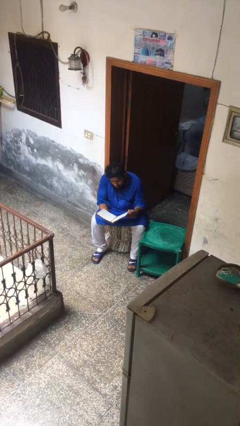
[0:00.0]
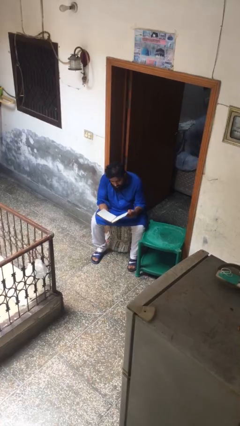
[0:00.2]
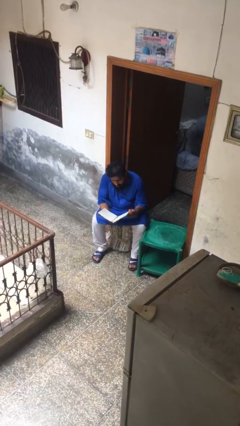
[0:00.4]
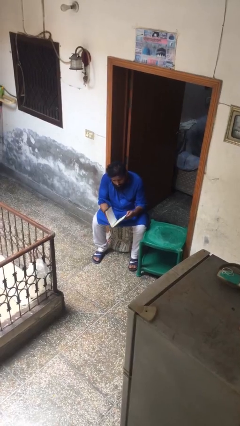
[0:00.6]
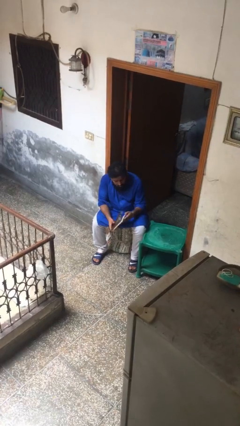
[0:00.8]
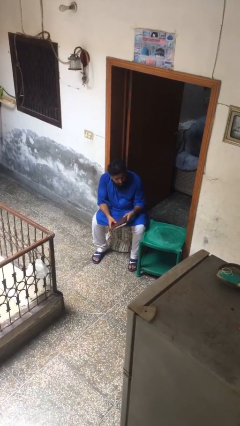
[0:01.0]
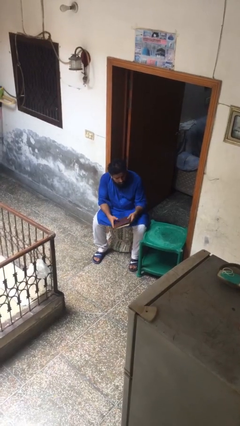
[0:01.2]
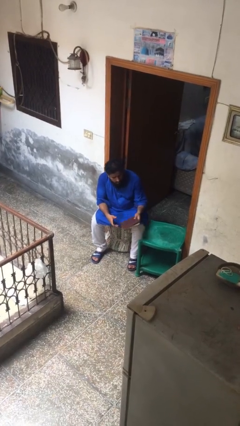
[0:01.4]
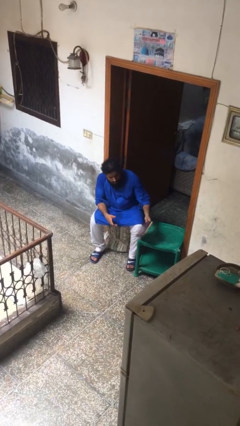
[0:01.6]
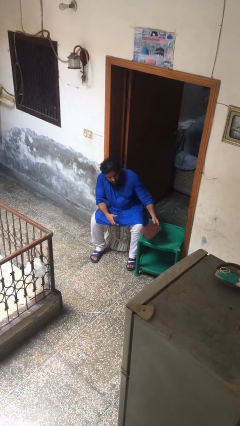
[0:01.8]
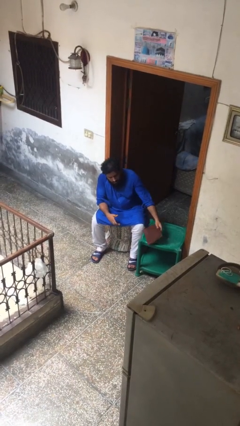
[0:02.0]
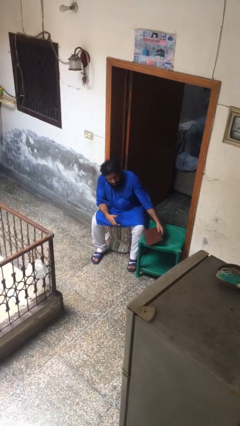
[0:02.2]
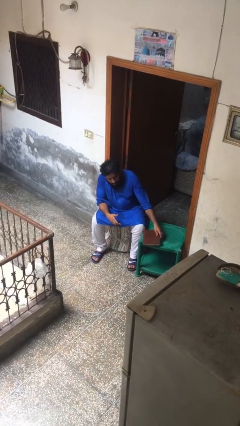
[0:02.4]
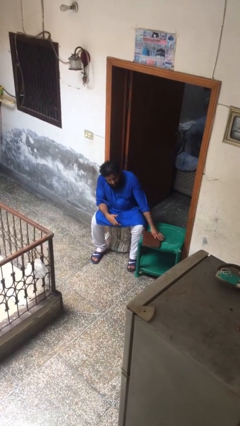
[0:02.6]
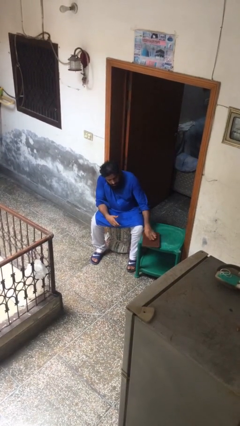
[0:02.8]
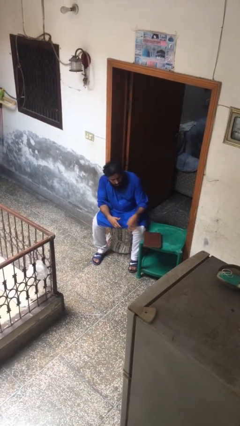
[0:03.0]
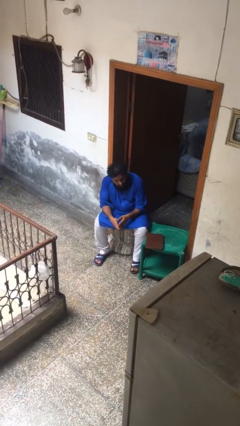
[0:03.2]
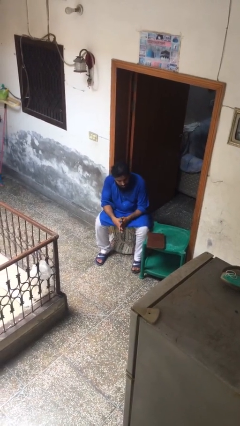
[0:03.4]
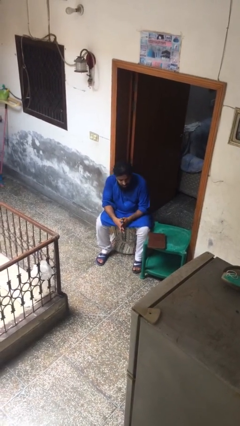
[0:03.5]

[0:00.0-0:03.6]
person puts down object on table

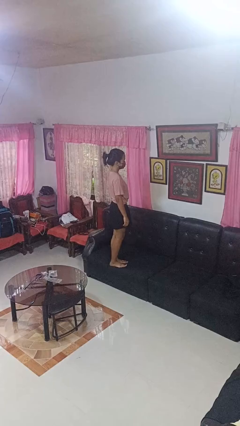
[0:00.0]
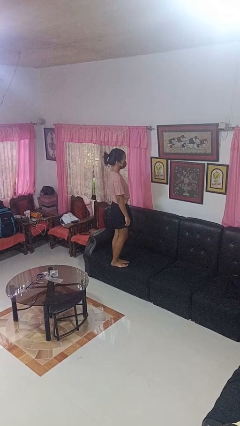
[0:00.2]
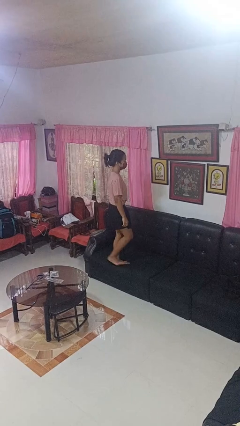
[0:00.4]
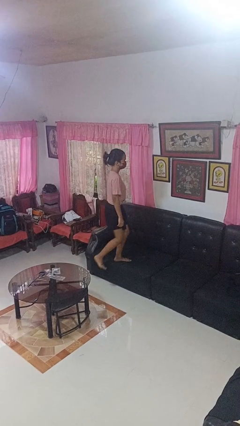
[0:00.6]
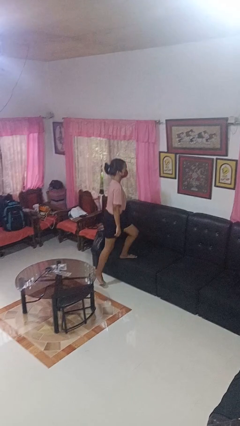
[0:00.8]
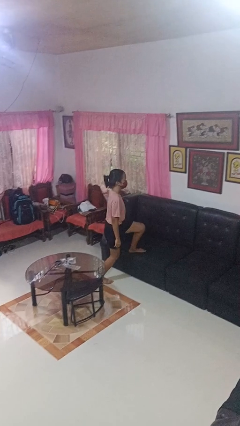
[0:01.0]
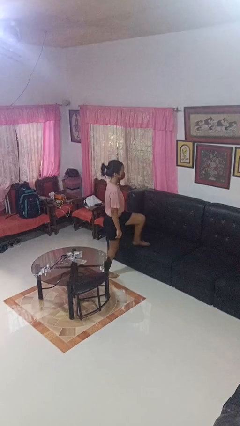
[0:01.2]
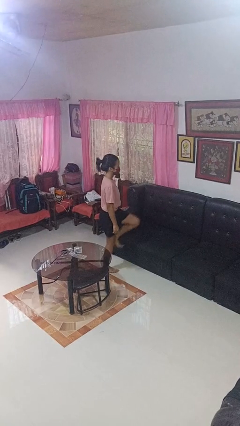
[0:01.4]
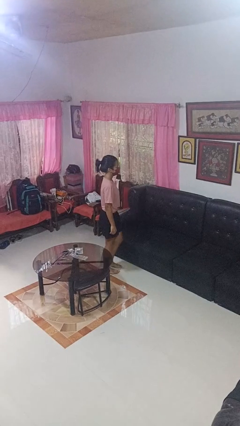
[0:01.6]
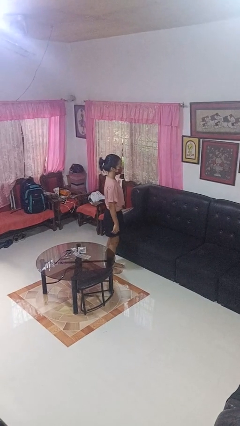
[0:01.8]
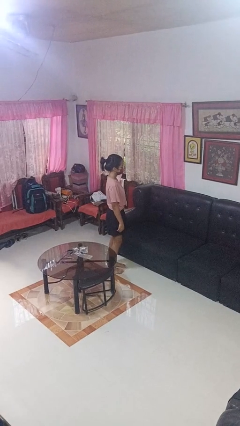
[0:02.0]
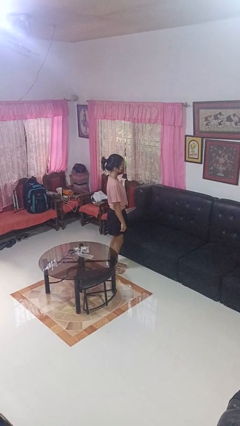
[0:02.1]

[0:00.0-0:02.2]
person climbs off couch

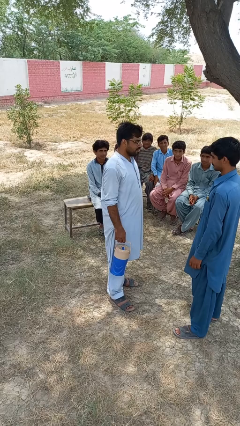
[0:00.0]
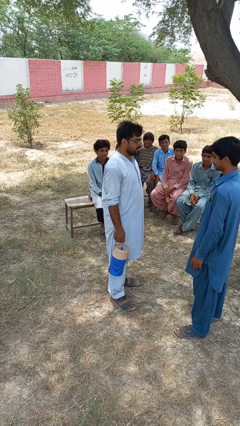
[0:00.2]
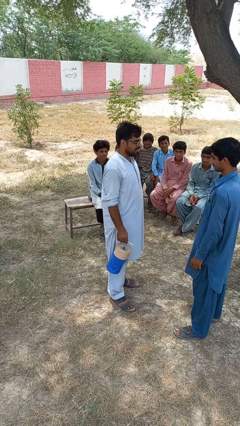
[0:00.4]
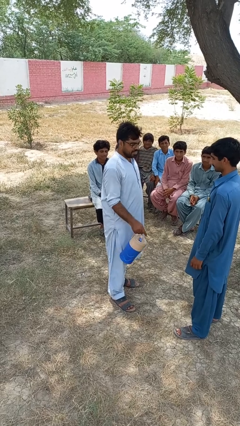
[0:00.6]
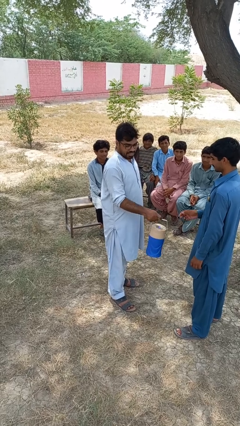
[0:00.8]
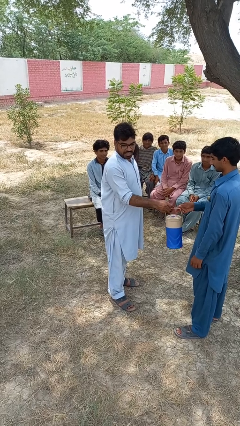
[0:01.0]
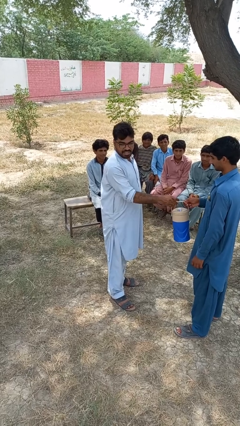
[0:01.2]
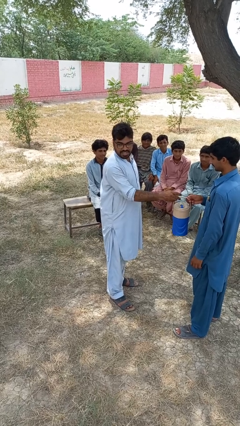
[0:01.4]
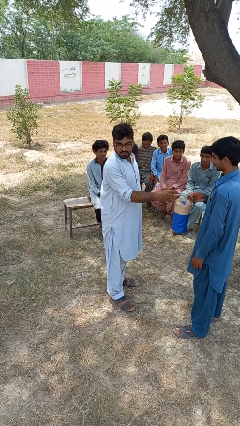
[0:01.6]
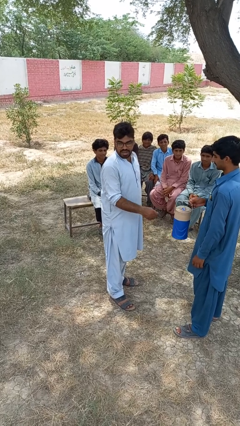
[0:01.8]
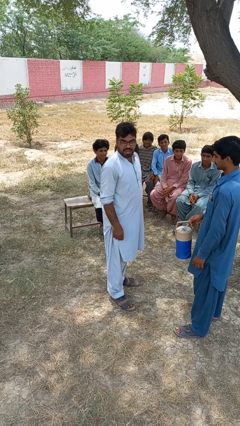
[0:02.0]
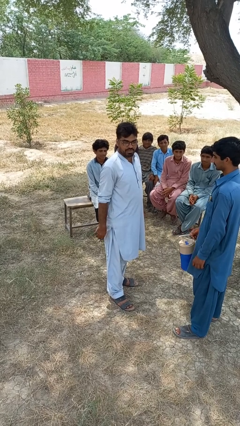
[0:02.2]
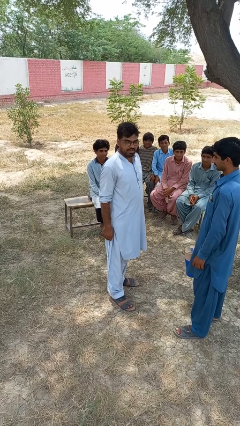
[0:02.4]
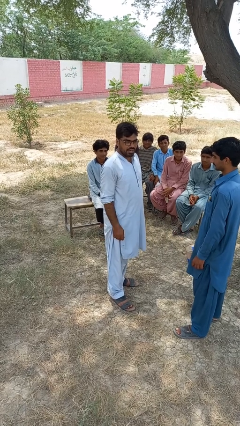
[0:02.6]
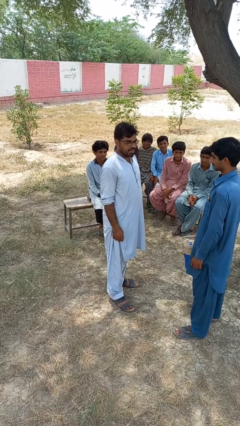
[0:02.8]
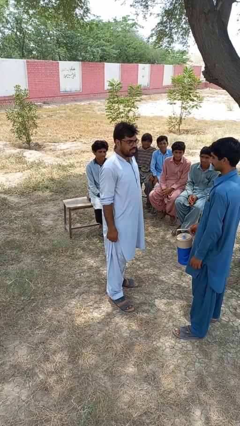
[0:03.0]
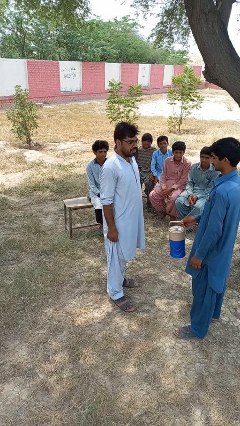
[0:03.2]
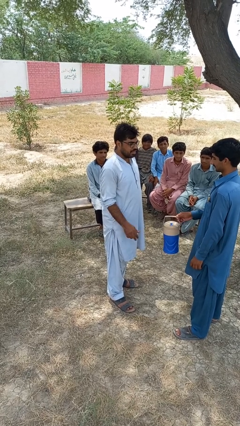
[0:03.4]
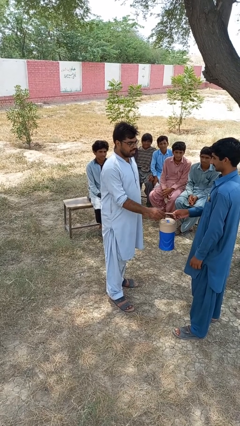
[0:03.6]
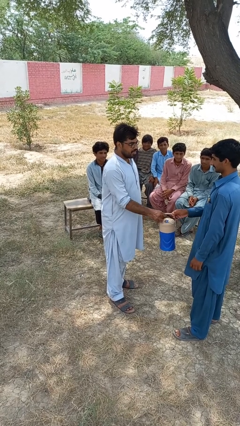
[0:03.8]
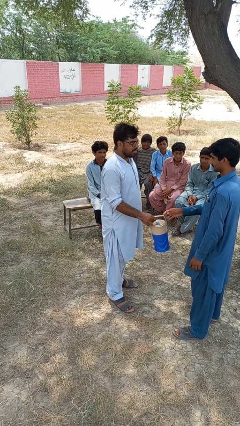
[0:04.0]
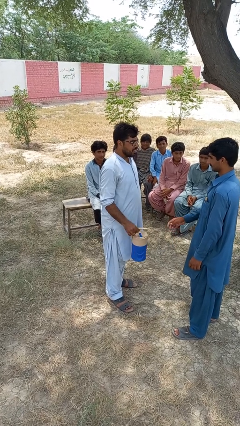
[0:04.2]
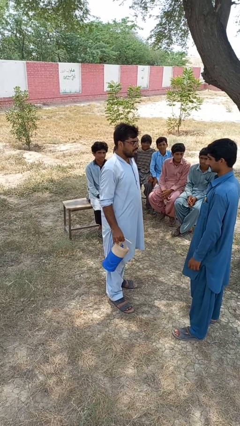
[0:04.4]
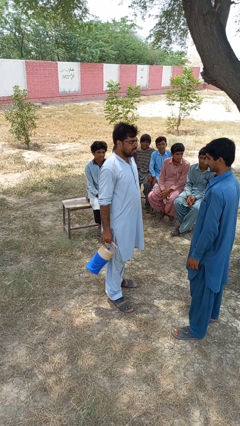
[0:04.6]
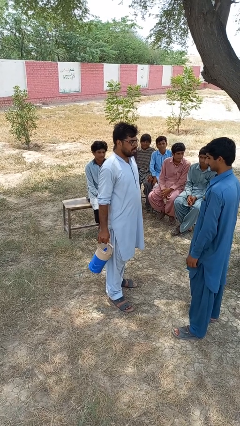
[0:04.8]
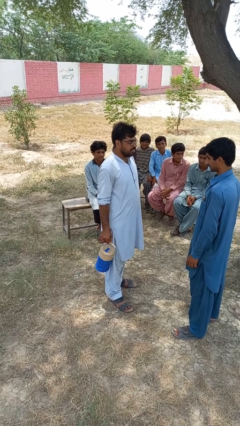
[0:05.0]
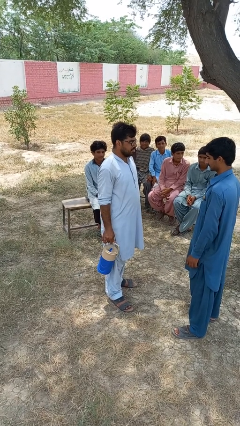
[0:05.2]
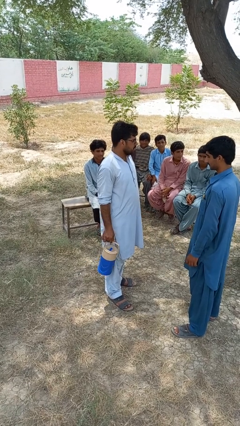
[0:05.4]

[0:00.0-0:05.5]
person transfers object to person

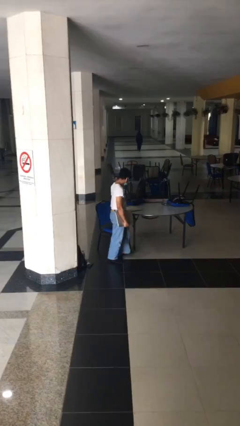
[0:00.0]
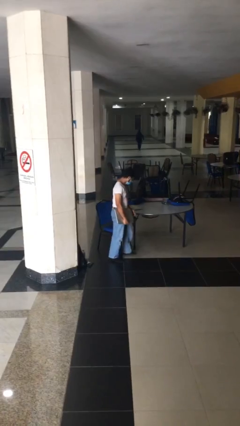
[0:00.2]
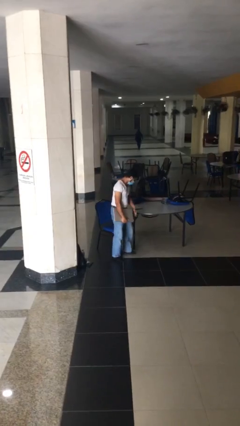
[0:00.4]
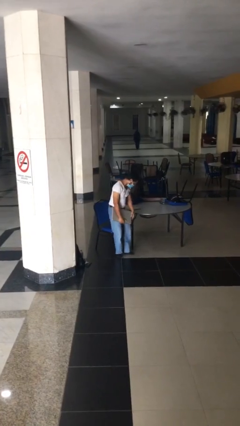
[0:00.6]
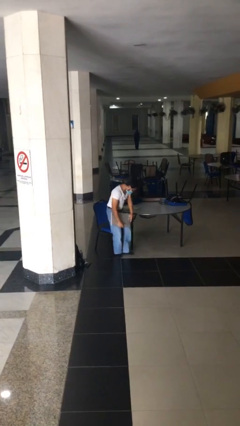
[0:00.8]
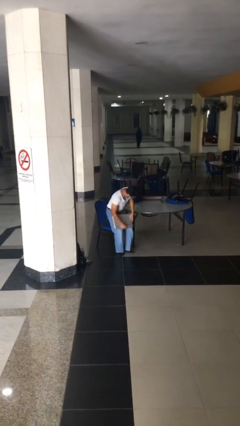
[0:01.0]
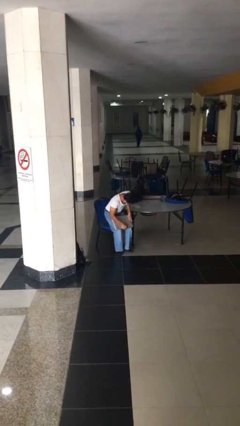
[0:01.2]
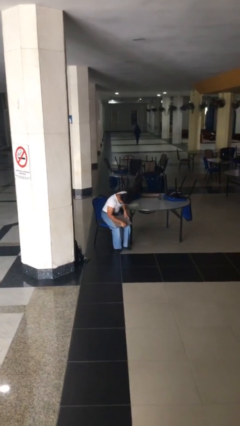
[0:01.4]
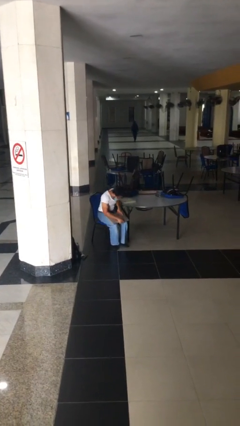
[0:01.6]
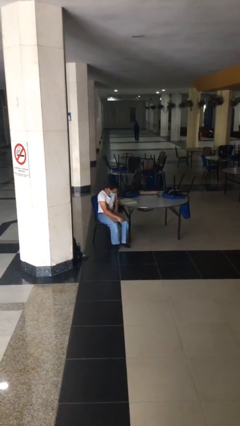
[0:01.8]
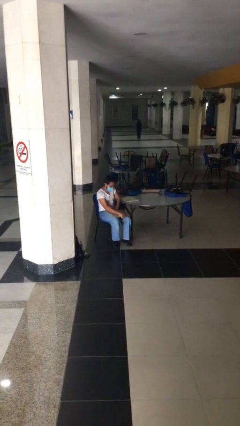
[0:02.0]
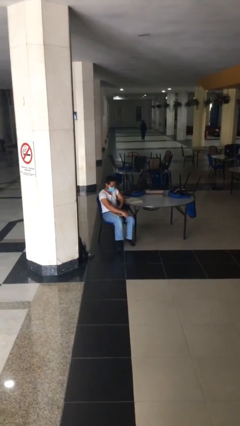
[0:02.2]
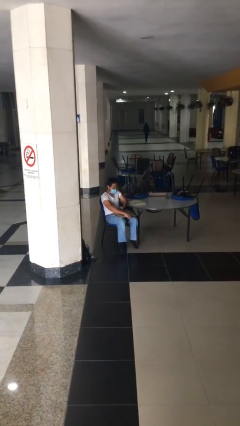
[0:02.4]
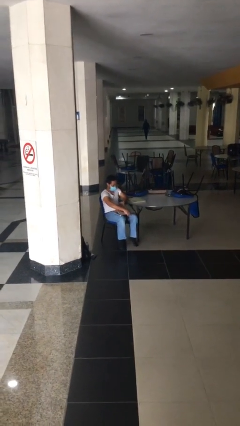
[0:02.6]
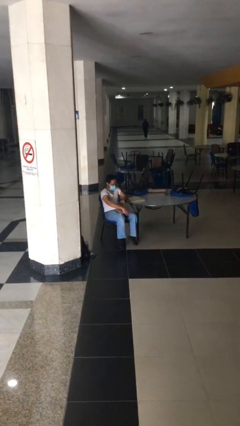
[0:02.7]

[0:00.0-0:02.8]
person sits down

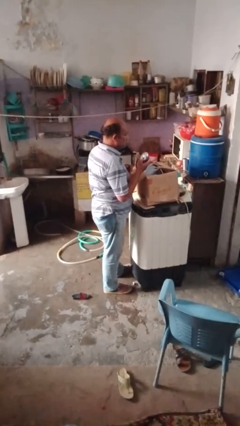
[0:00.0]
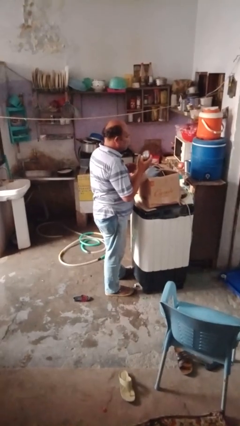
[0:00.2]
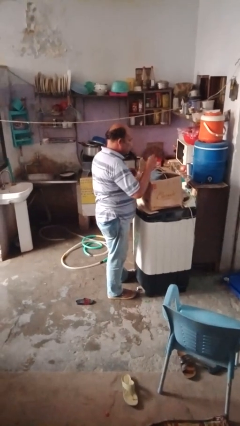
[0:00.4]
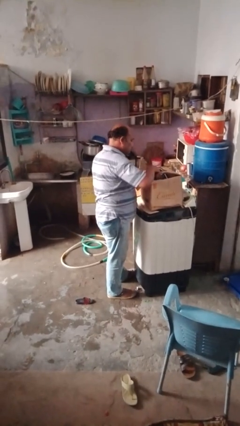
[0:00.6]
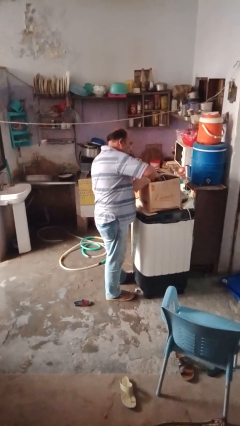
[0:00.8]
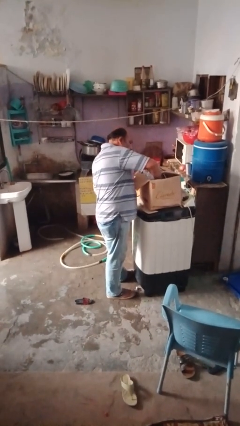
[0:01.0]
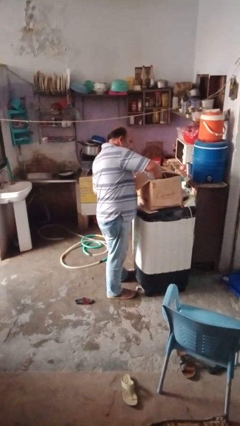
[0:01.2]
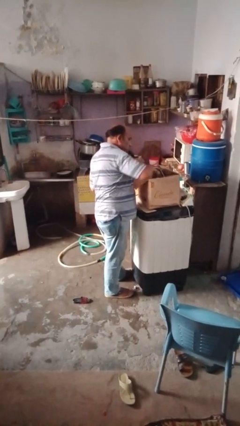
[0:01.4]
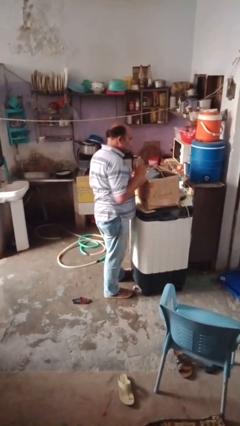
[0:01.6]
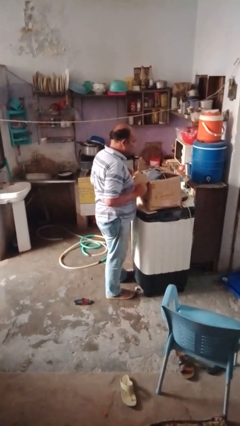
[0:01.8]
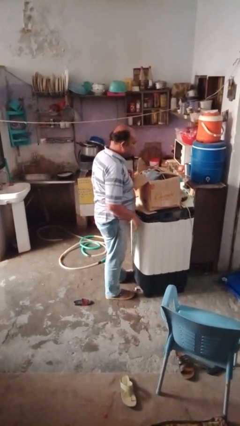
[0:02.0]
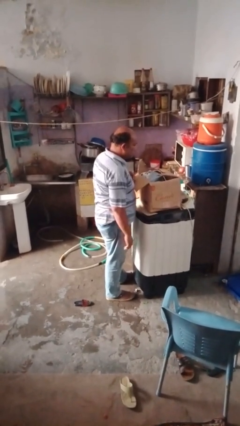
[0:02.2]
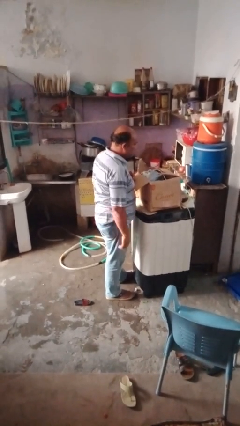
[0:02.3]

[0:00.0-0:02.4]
person puts object into box

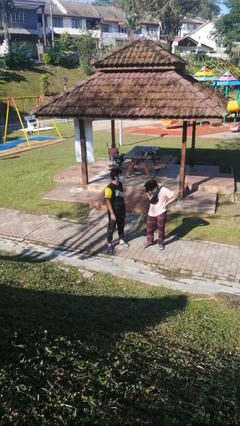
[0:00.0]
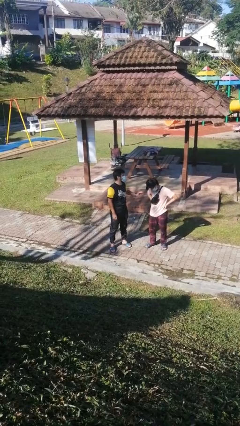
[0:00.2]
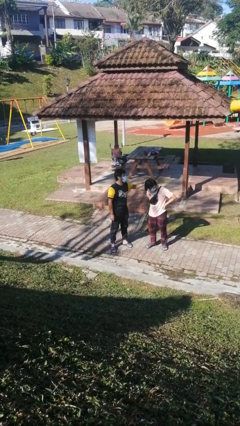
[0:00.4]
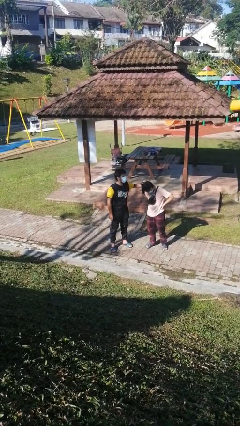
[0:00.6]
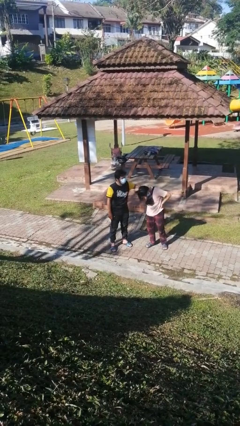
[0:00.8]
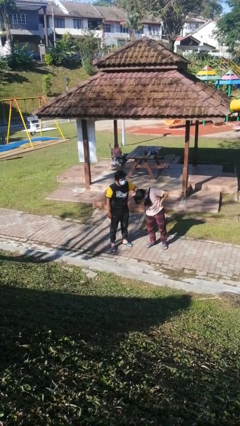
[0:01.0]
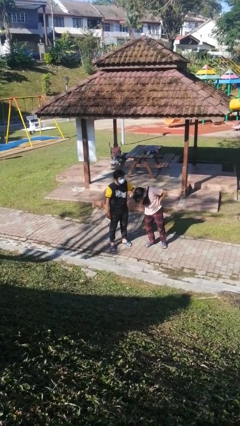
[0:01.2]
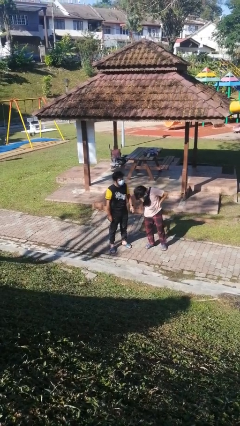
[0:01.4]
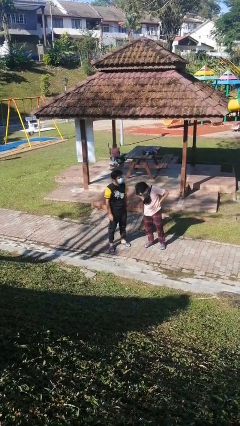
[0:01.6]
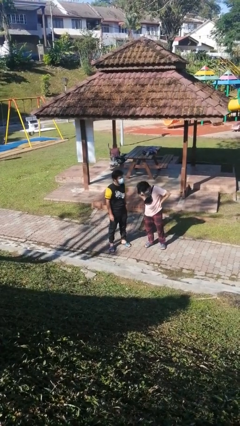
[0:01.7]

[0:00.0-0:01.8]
person grabs person by hair
